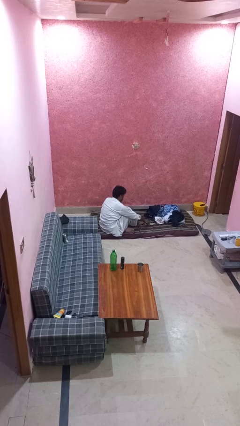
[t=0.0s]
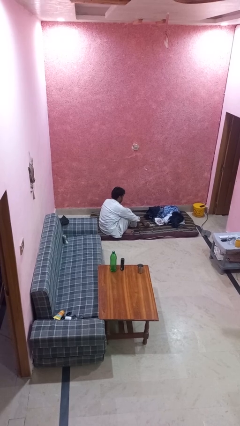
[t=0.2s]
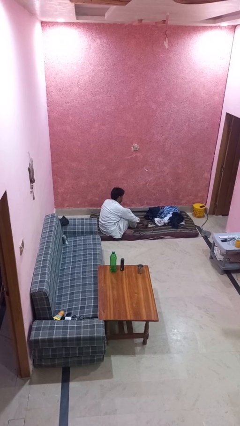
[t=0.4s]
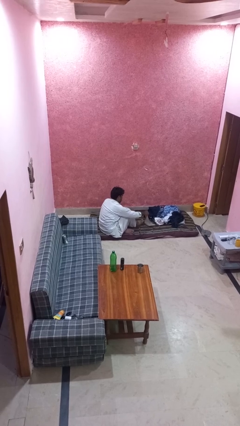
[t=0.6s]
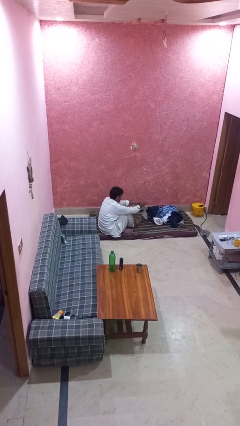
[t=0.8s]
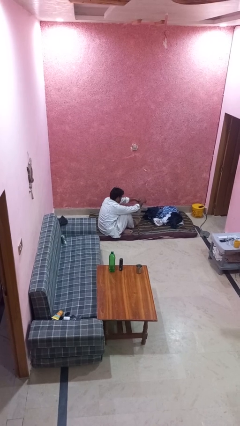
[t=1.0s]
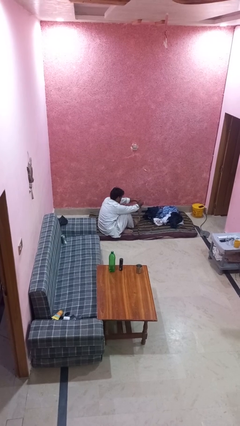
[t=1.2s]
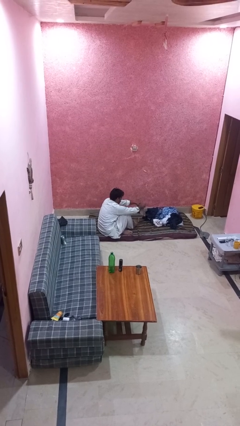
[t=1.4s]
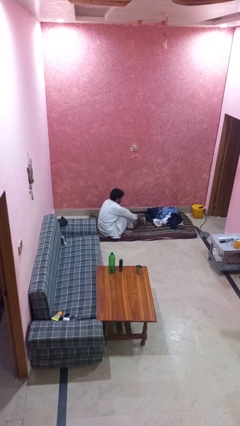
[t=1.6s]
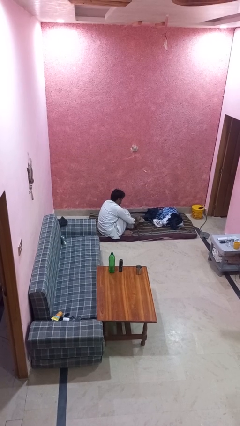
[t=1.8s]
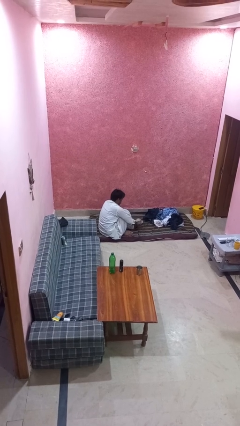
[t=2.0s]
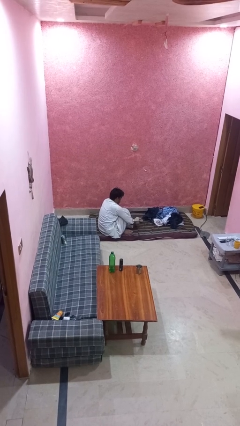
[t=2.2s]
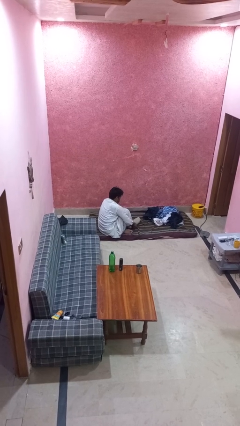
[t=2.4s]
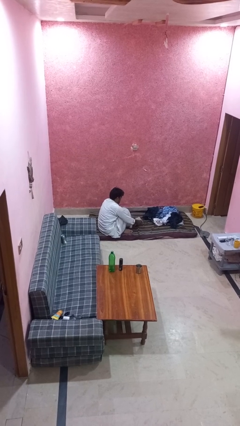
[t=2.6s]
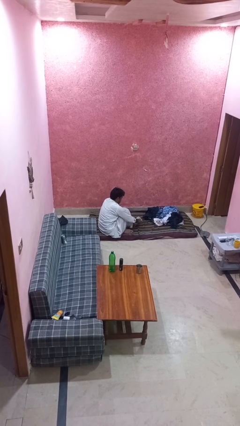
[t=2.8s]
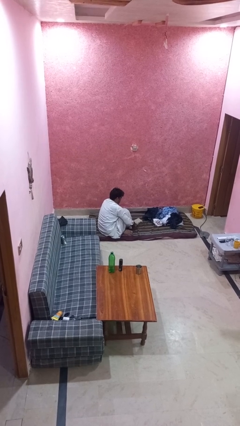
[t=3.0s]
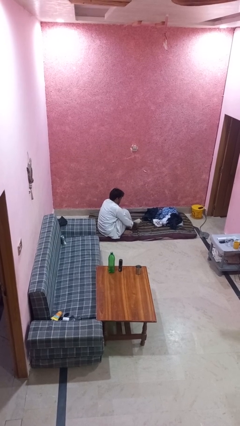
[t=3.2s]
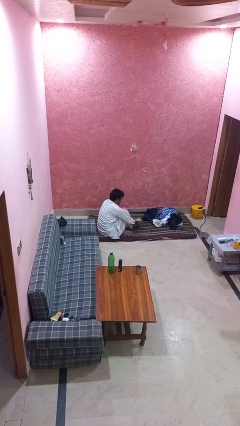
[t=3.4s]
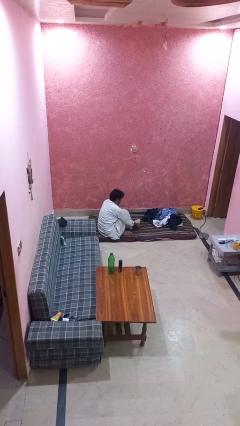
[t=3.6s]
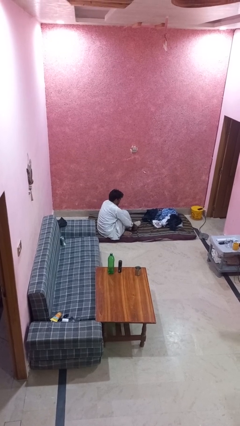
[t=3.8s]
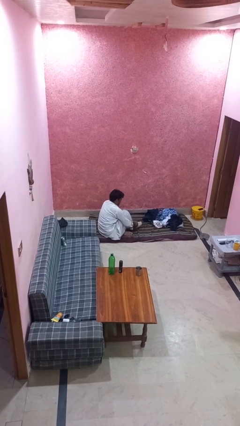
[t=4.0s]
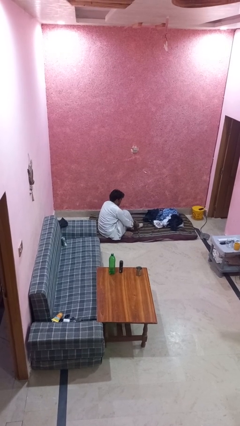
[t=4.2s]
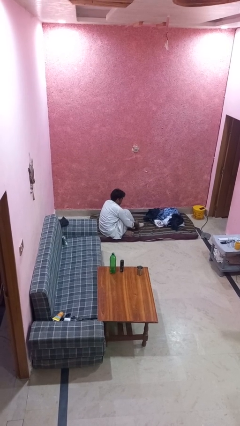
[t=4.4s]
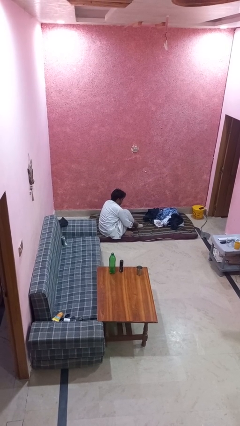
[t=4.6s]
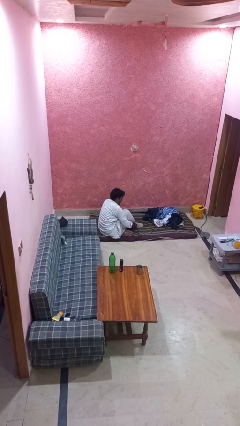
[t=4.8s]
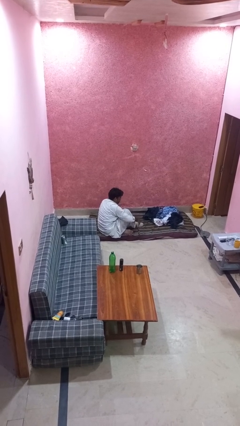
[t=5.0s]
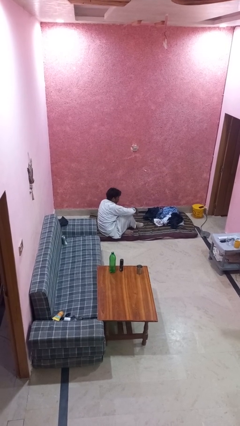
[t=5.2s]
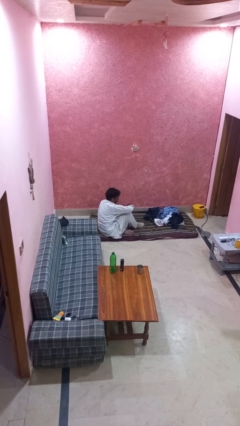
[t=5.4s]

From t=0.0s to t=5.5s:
person puts on socks

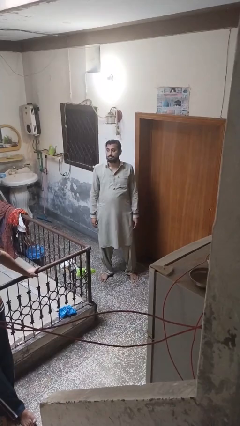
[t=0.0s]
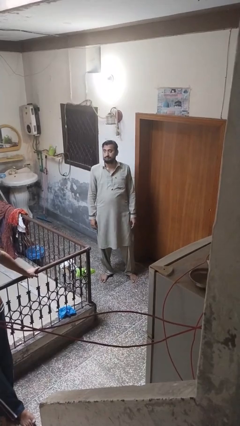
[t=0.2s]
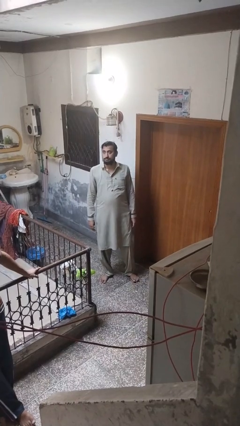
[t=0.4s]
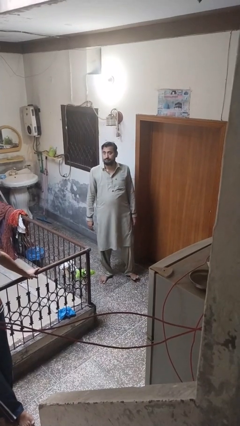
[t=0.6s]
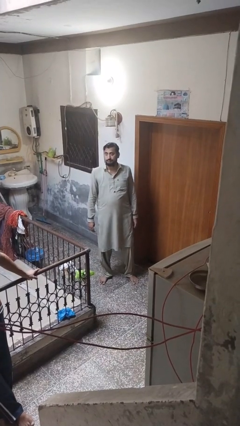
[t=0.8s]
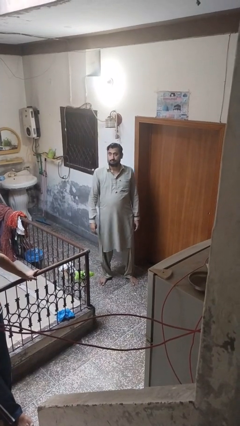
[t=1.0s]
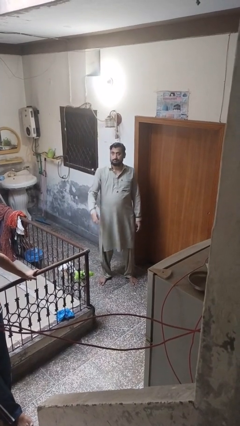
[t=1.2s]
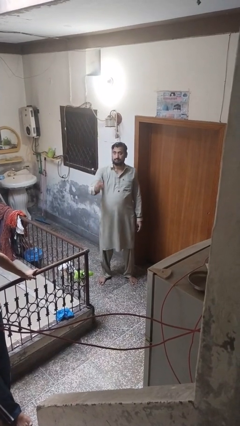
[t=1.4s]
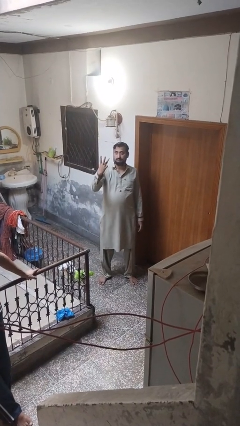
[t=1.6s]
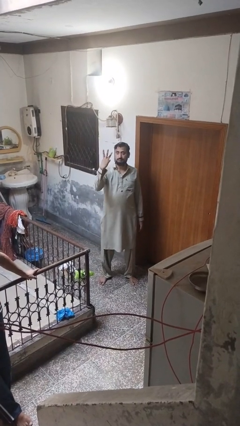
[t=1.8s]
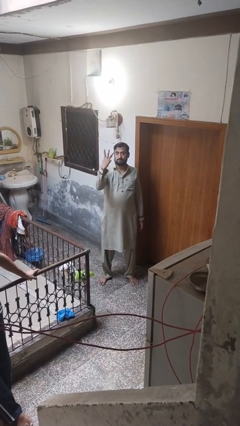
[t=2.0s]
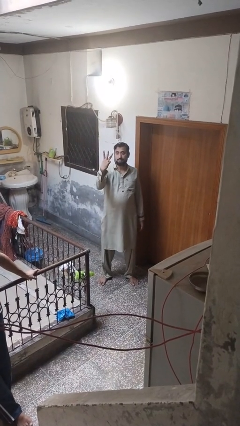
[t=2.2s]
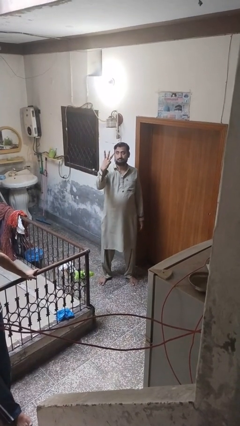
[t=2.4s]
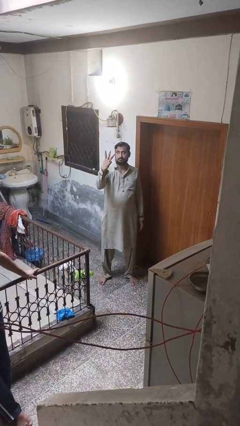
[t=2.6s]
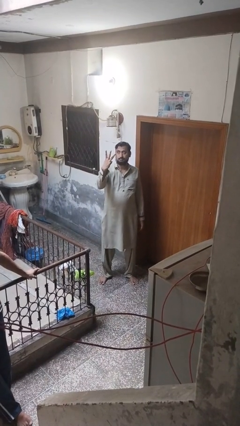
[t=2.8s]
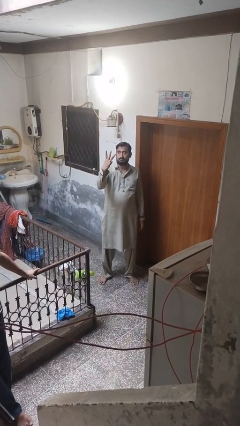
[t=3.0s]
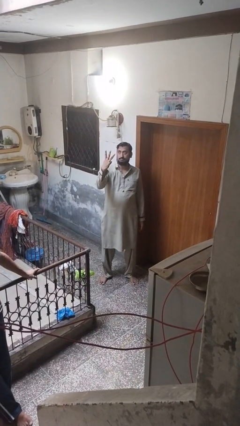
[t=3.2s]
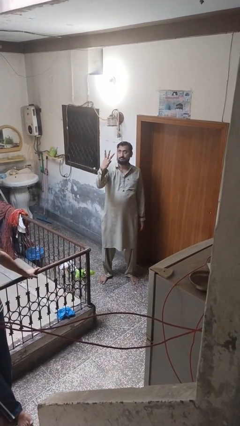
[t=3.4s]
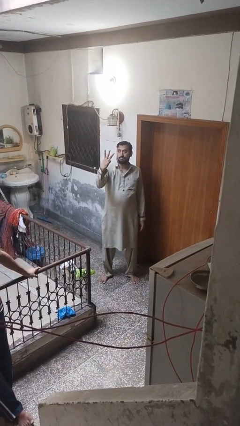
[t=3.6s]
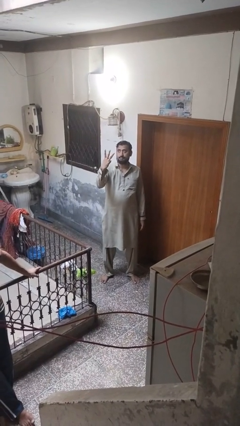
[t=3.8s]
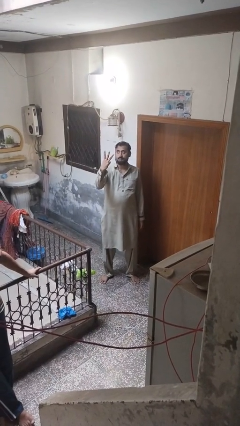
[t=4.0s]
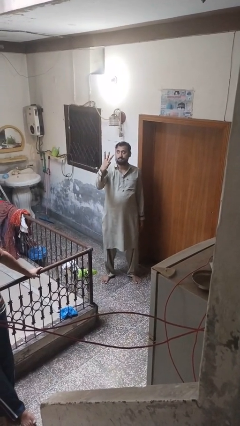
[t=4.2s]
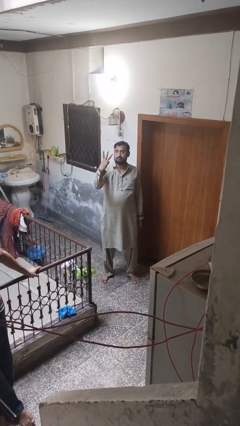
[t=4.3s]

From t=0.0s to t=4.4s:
person gestures number three

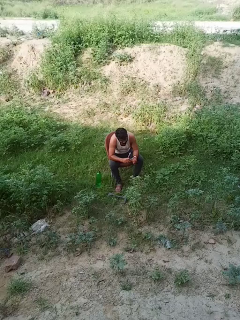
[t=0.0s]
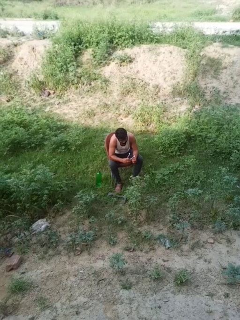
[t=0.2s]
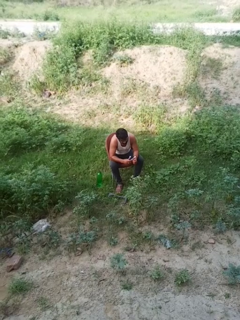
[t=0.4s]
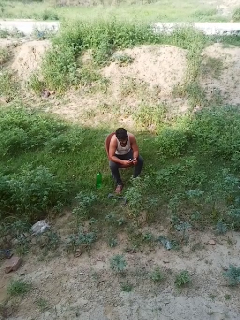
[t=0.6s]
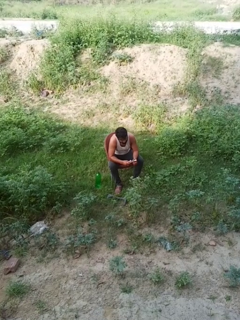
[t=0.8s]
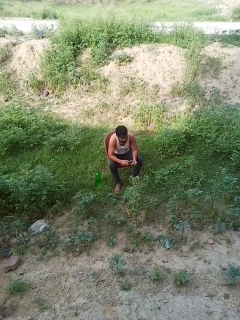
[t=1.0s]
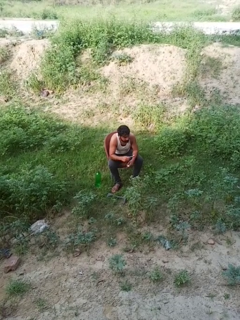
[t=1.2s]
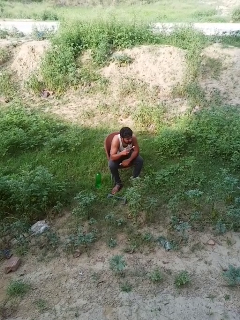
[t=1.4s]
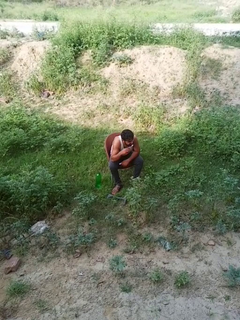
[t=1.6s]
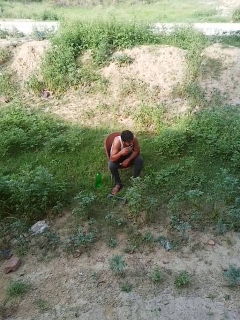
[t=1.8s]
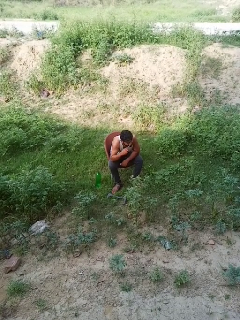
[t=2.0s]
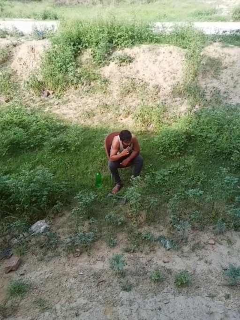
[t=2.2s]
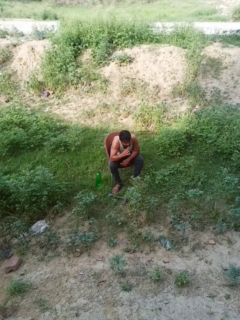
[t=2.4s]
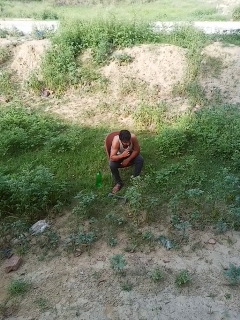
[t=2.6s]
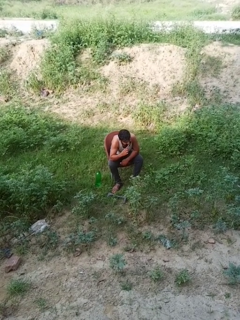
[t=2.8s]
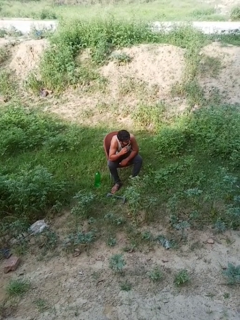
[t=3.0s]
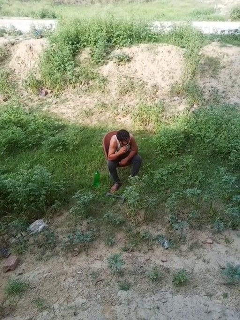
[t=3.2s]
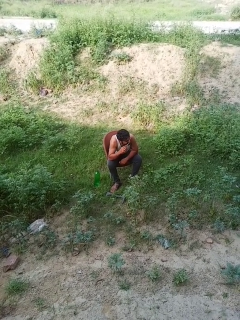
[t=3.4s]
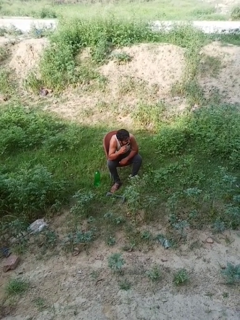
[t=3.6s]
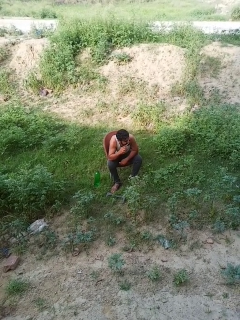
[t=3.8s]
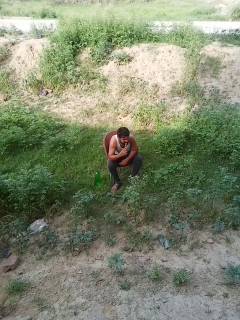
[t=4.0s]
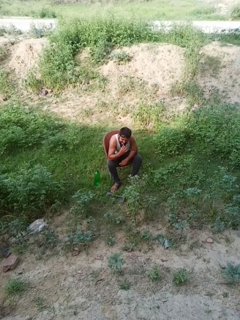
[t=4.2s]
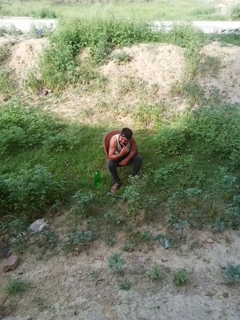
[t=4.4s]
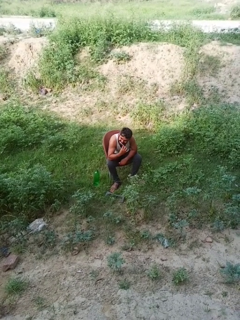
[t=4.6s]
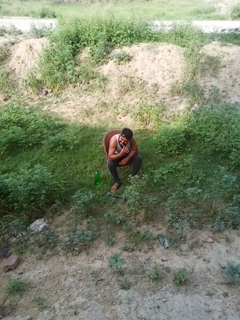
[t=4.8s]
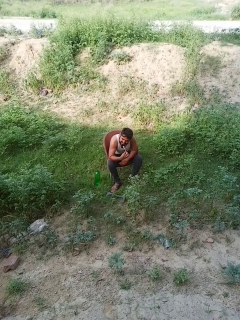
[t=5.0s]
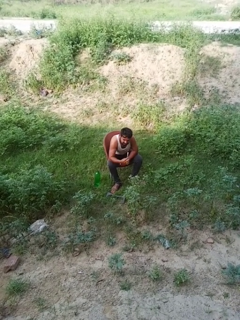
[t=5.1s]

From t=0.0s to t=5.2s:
person brushes teeth

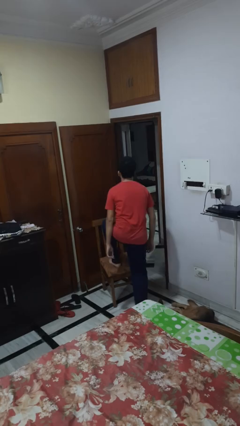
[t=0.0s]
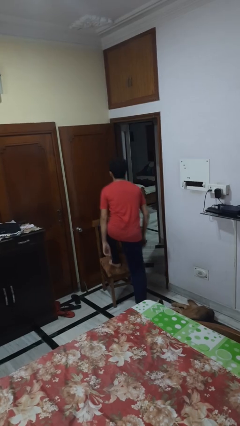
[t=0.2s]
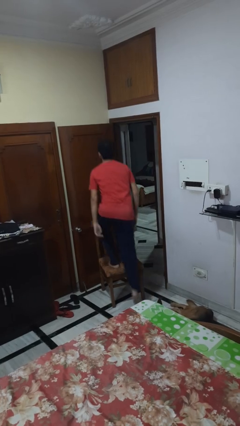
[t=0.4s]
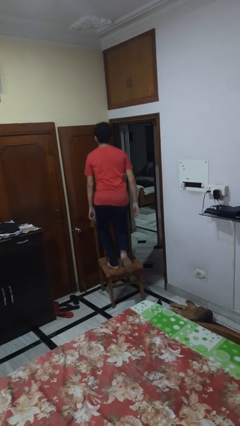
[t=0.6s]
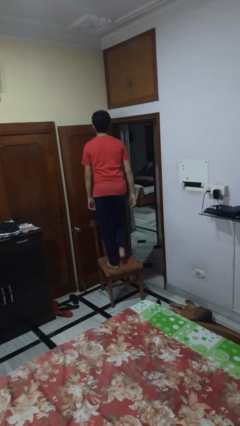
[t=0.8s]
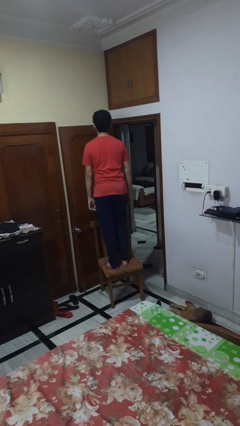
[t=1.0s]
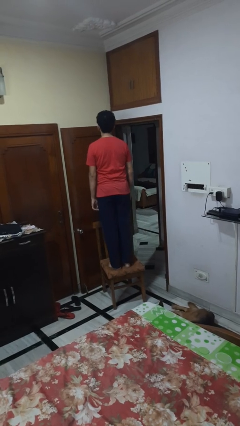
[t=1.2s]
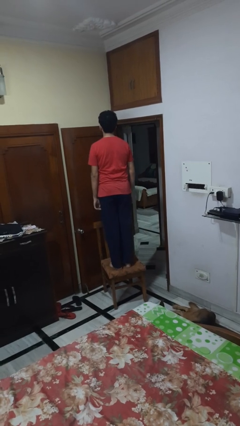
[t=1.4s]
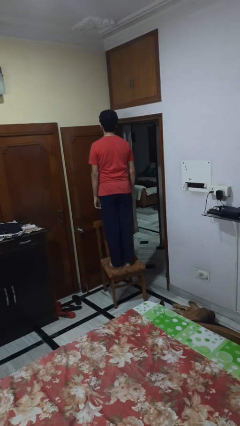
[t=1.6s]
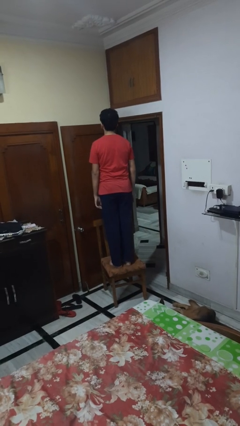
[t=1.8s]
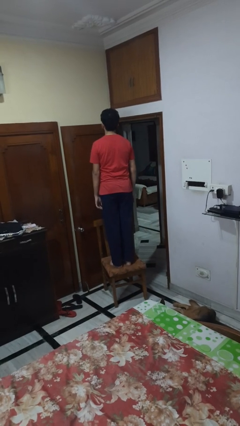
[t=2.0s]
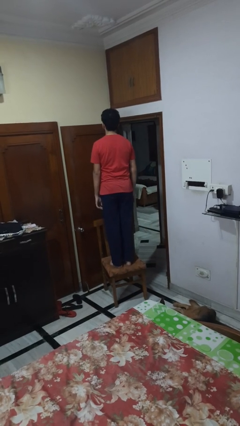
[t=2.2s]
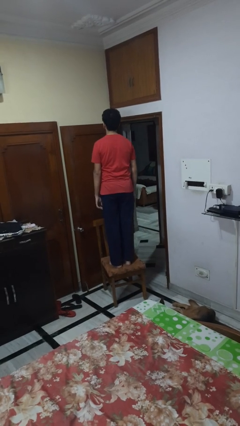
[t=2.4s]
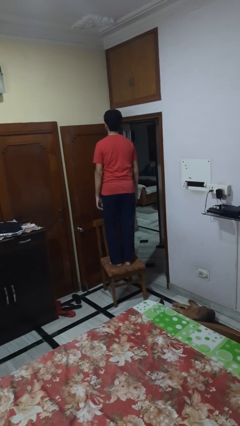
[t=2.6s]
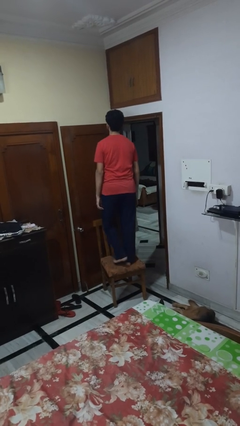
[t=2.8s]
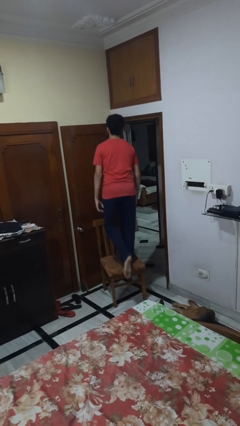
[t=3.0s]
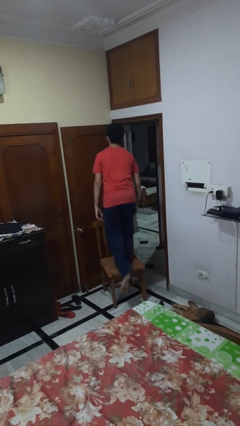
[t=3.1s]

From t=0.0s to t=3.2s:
person climbs on chair

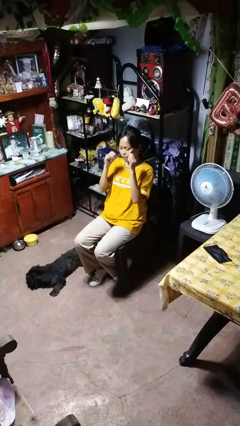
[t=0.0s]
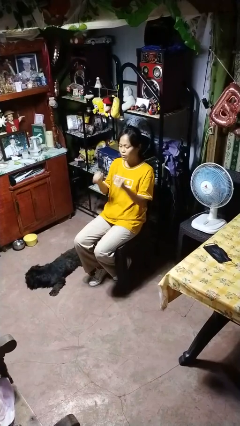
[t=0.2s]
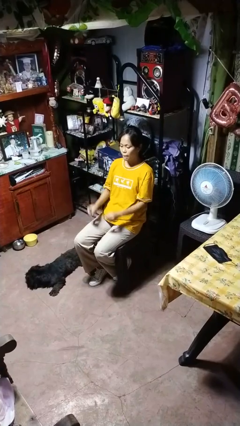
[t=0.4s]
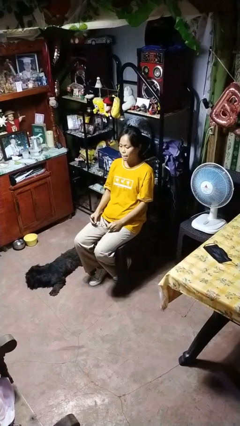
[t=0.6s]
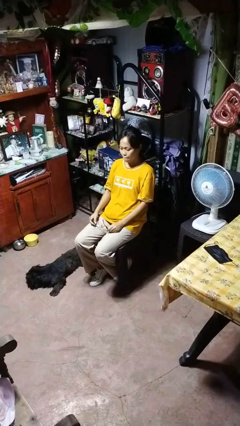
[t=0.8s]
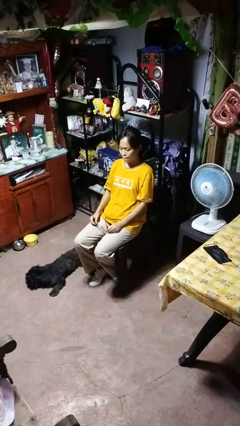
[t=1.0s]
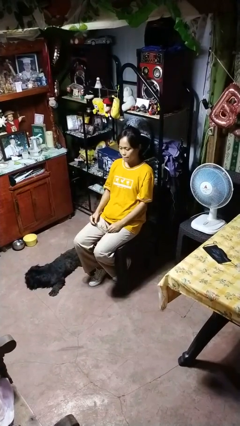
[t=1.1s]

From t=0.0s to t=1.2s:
person takes off glasses
